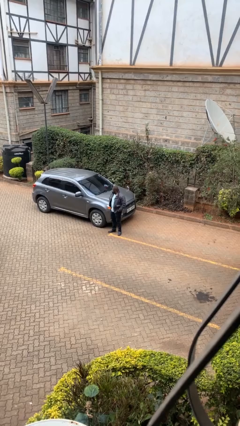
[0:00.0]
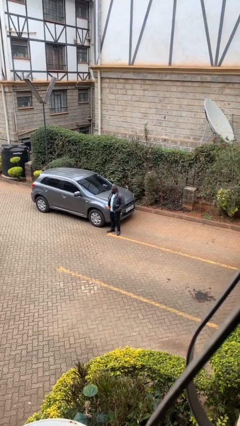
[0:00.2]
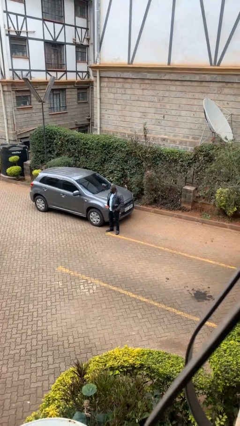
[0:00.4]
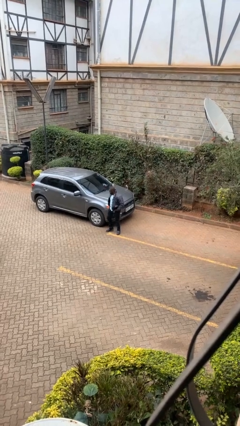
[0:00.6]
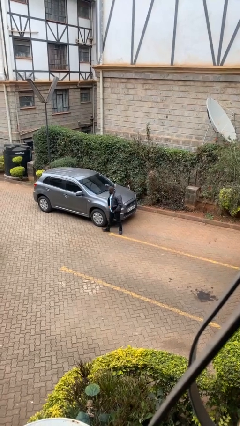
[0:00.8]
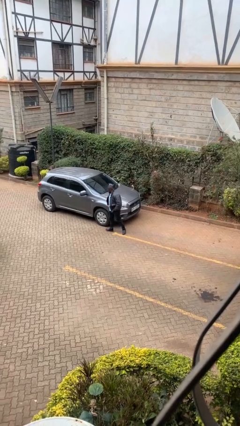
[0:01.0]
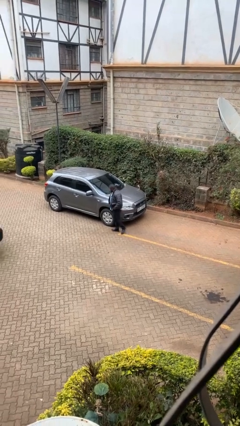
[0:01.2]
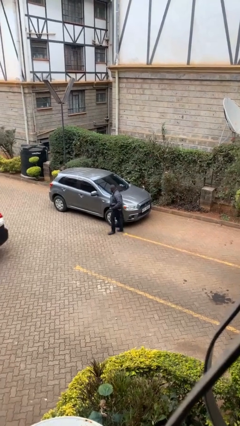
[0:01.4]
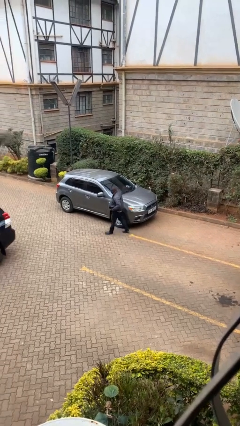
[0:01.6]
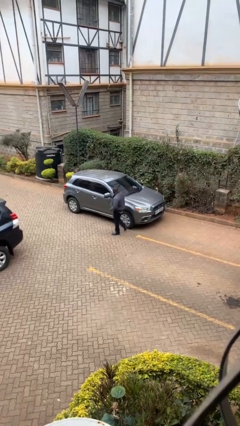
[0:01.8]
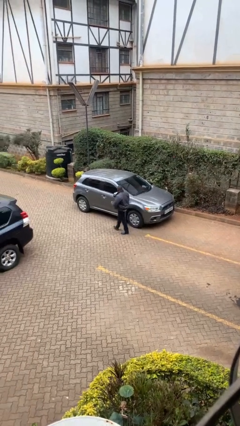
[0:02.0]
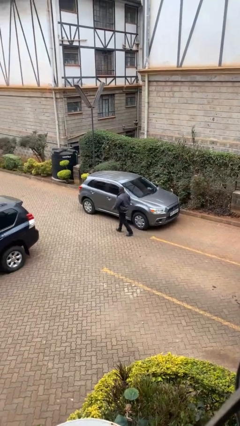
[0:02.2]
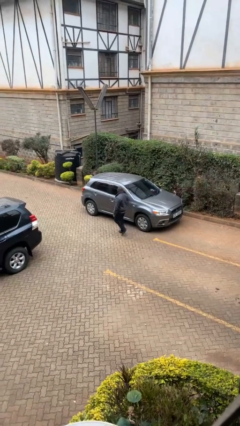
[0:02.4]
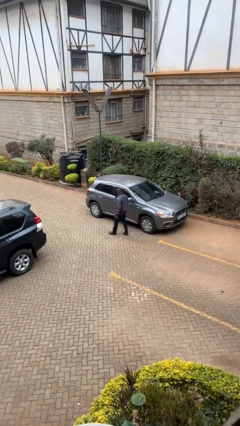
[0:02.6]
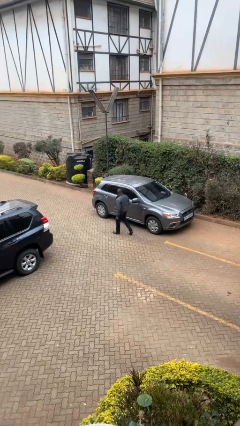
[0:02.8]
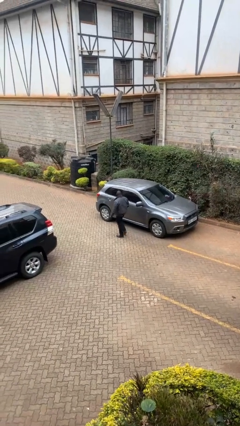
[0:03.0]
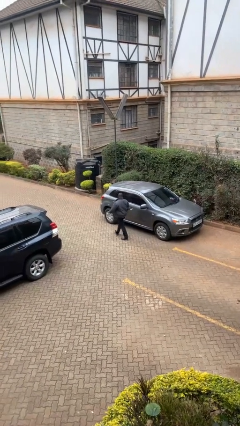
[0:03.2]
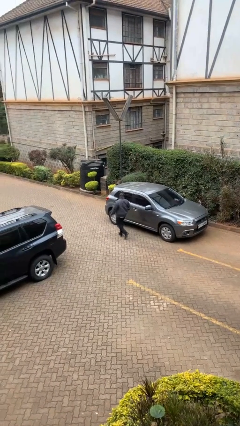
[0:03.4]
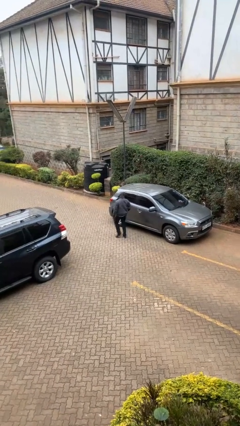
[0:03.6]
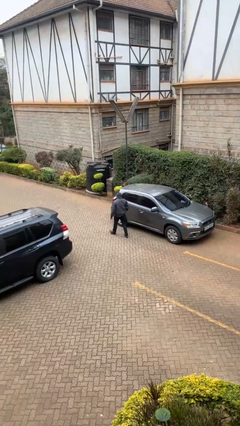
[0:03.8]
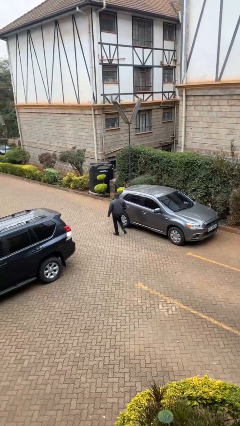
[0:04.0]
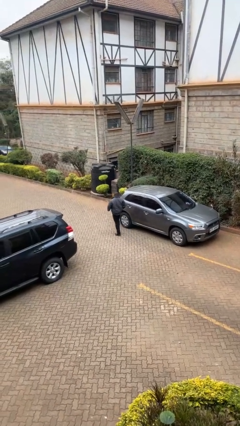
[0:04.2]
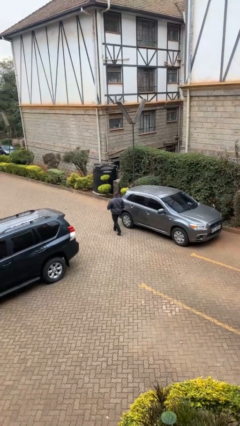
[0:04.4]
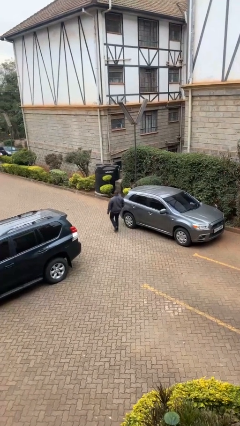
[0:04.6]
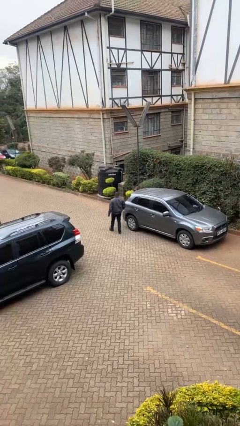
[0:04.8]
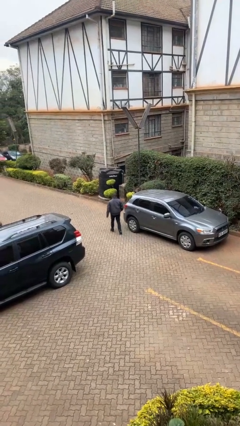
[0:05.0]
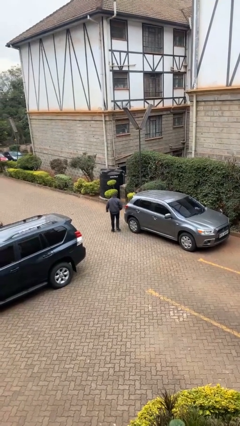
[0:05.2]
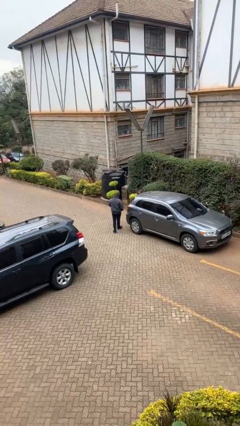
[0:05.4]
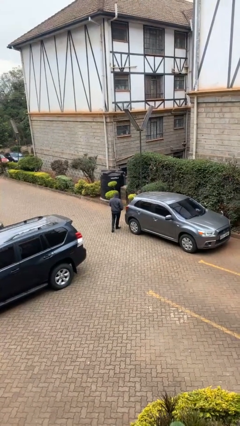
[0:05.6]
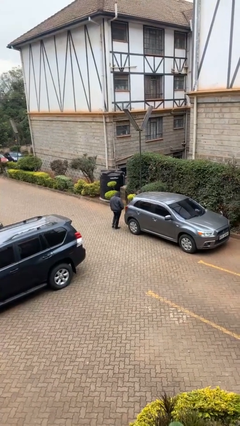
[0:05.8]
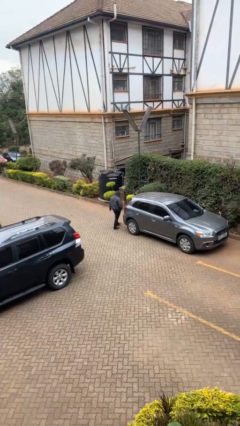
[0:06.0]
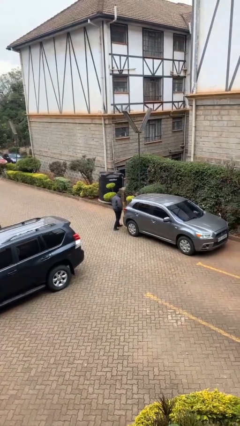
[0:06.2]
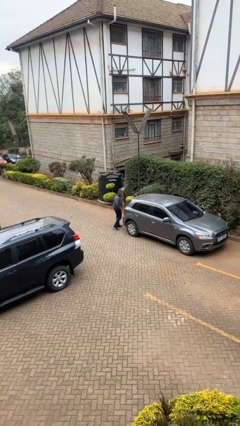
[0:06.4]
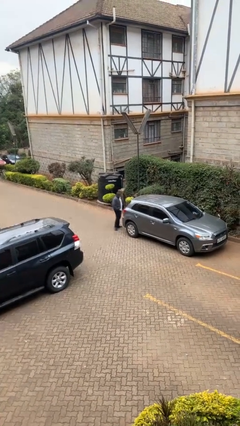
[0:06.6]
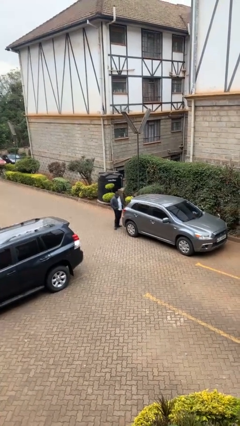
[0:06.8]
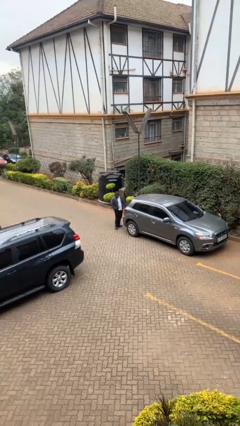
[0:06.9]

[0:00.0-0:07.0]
person walks around car

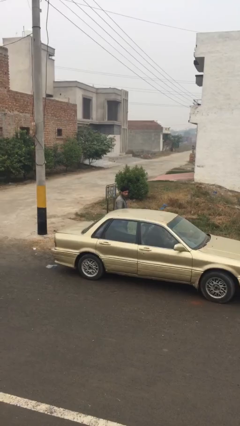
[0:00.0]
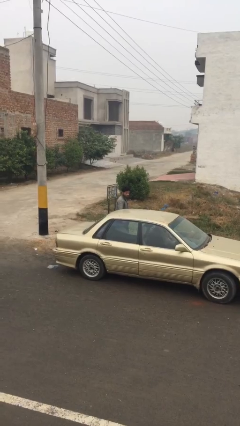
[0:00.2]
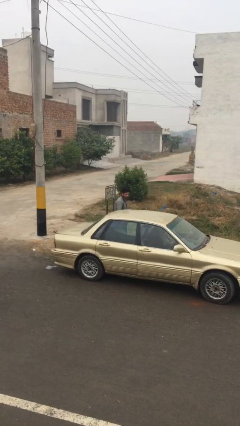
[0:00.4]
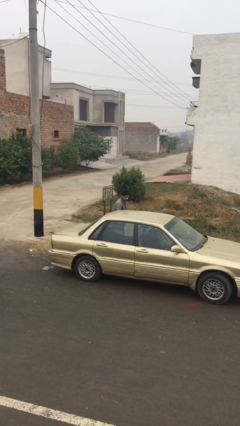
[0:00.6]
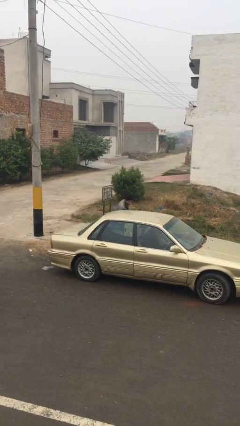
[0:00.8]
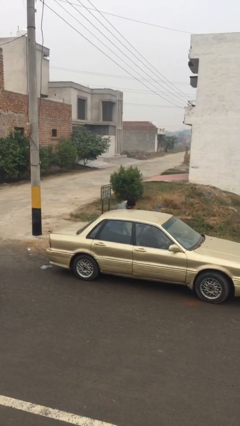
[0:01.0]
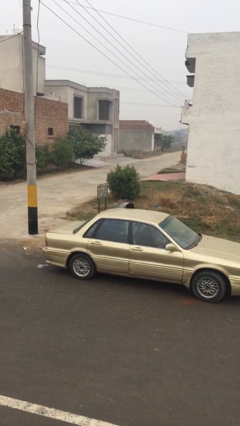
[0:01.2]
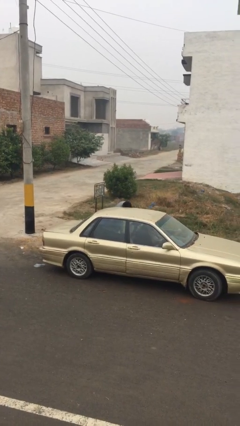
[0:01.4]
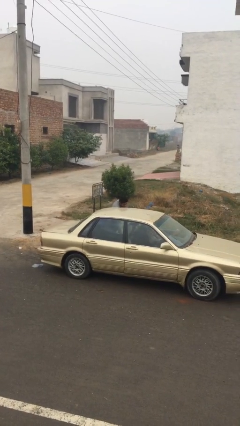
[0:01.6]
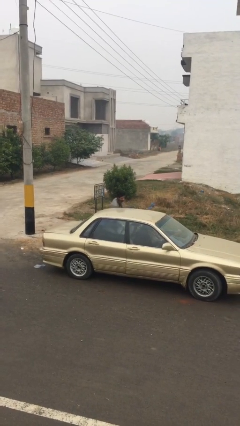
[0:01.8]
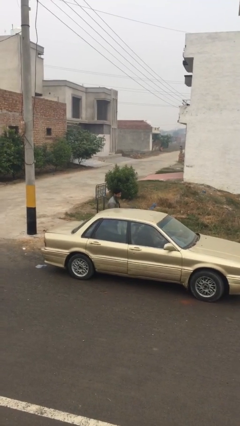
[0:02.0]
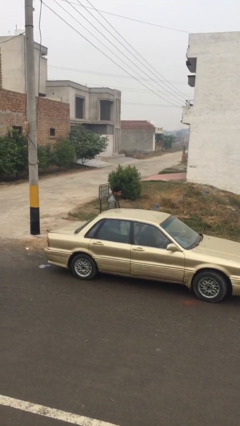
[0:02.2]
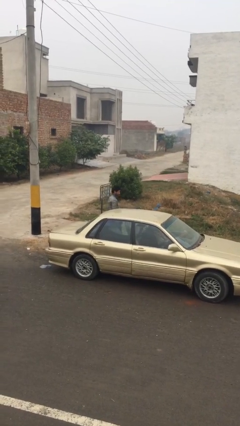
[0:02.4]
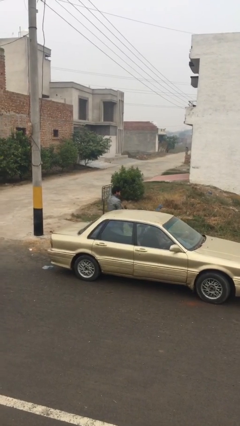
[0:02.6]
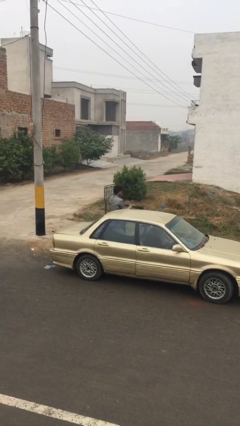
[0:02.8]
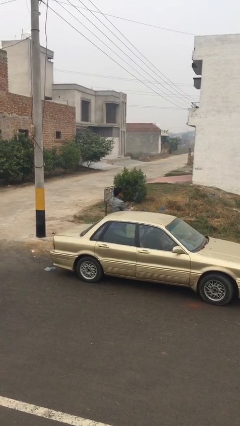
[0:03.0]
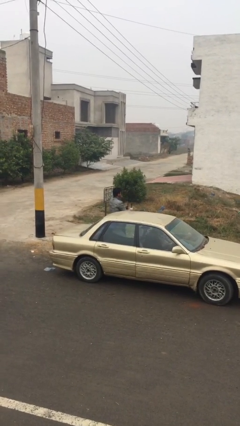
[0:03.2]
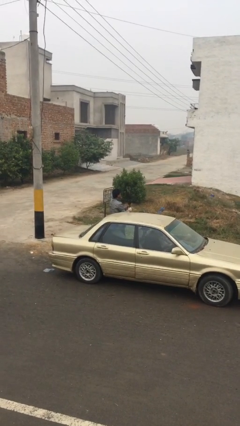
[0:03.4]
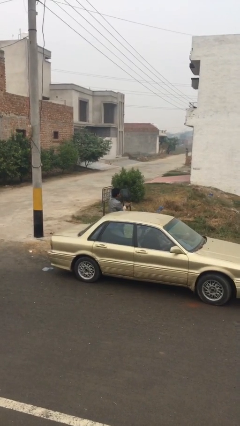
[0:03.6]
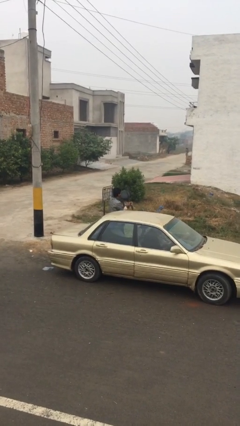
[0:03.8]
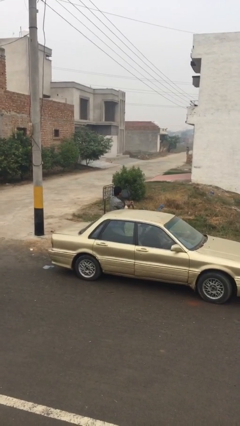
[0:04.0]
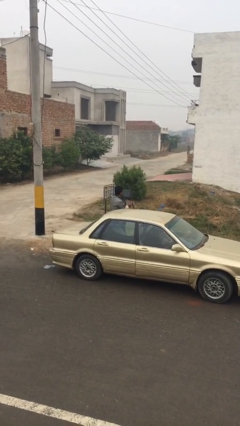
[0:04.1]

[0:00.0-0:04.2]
person unloads car

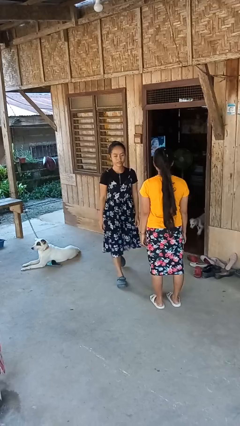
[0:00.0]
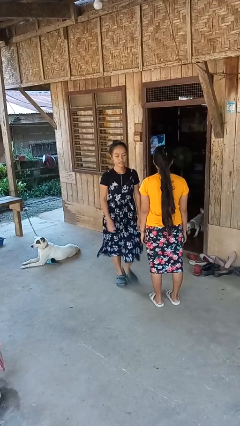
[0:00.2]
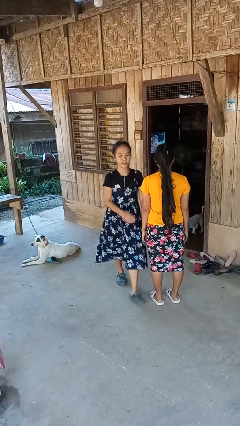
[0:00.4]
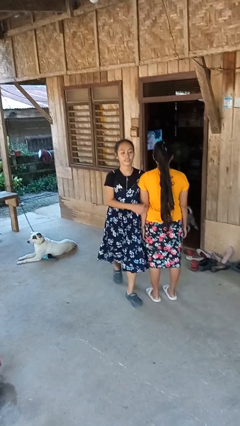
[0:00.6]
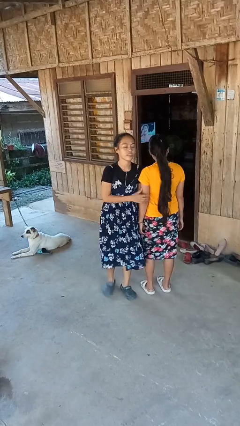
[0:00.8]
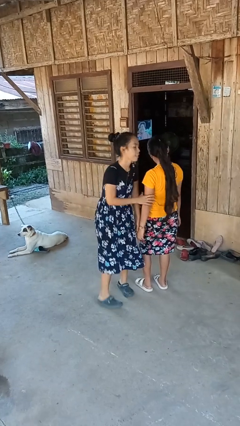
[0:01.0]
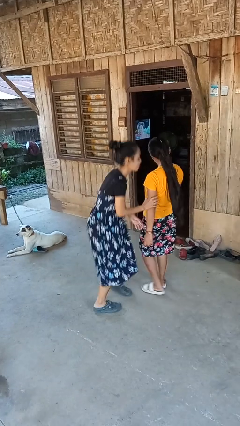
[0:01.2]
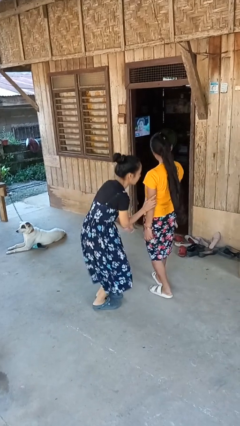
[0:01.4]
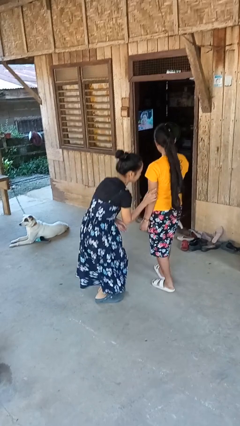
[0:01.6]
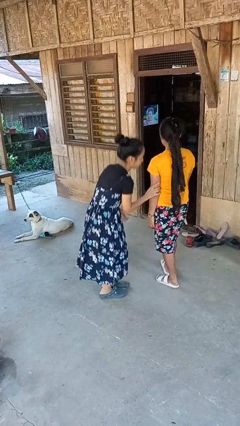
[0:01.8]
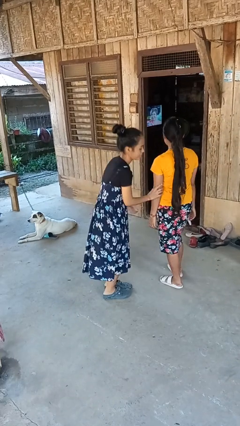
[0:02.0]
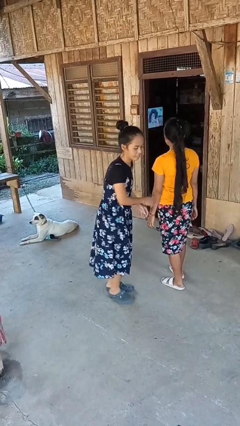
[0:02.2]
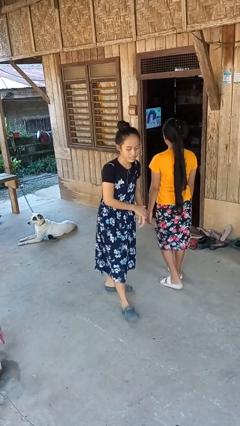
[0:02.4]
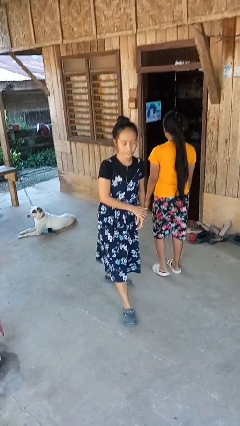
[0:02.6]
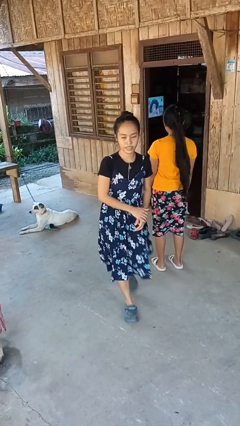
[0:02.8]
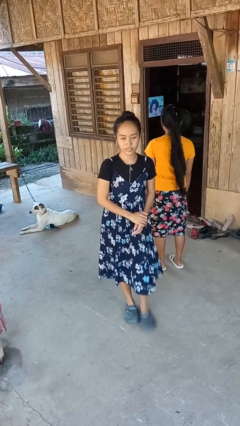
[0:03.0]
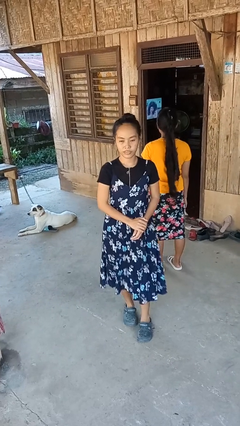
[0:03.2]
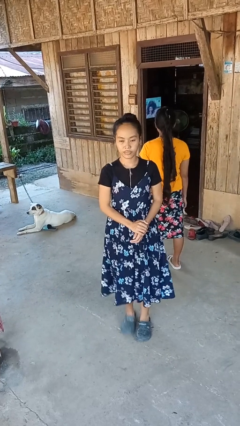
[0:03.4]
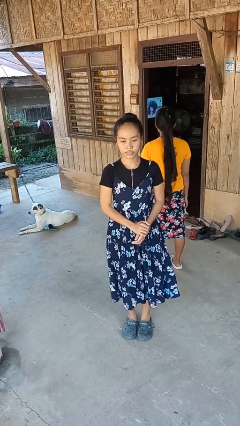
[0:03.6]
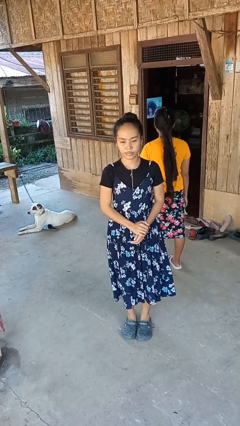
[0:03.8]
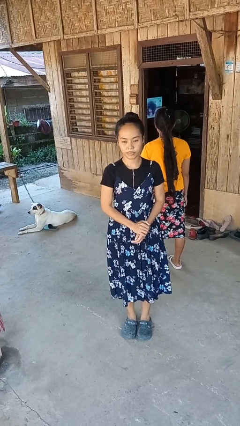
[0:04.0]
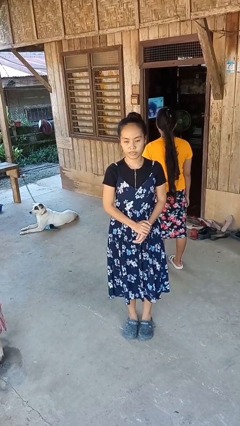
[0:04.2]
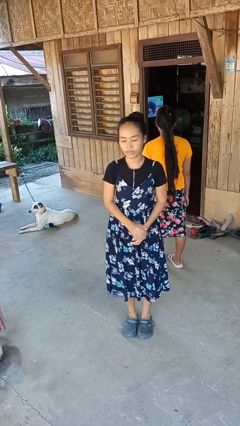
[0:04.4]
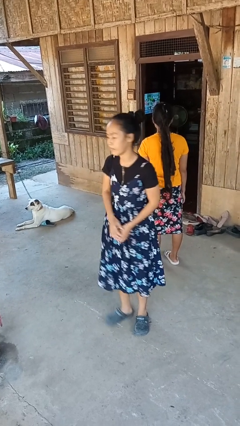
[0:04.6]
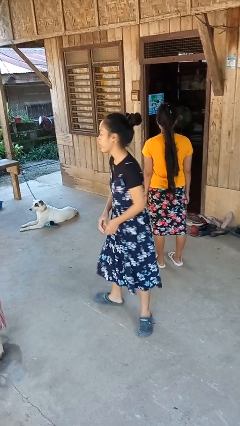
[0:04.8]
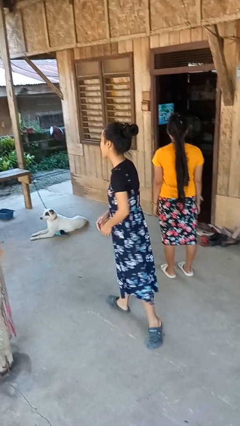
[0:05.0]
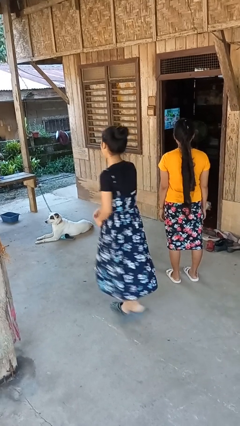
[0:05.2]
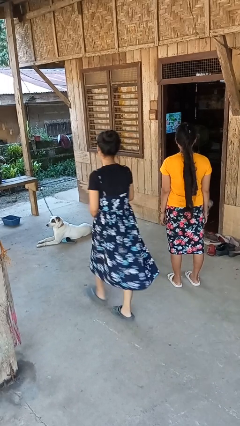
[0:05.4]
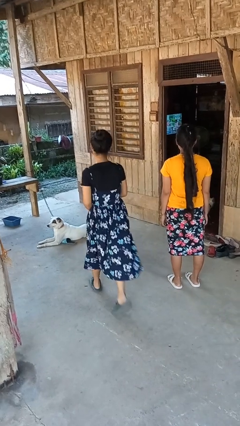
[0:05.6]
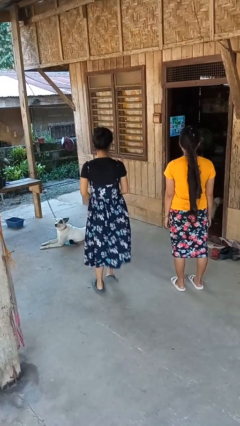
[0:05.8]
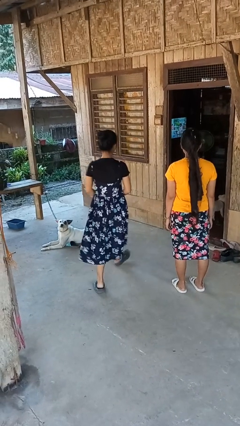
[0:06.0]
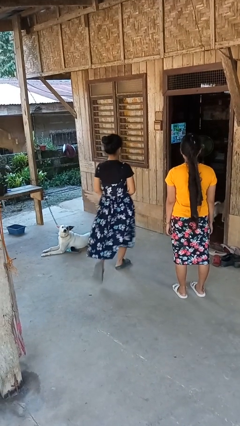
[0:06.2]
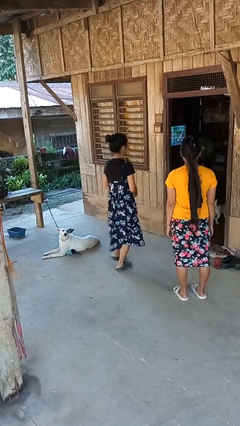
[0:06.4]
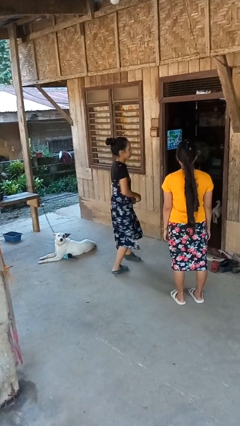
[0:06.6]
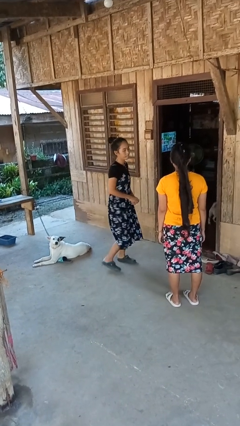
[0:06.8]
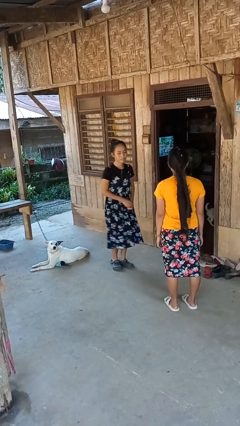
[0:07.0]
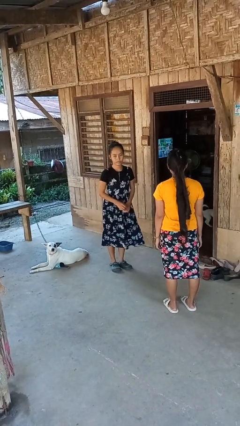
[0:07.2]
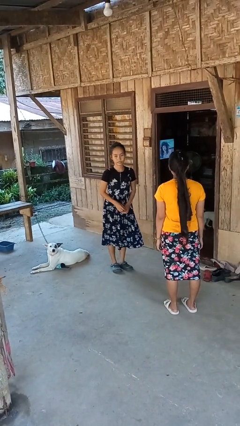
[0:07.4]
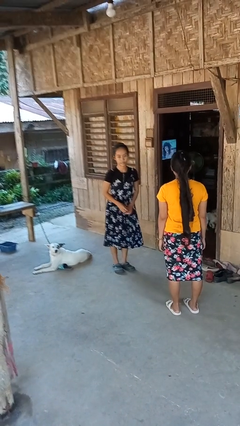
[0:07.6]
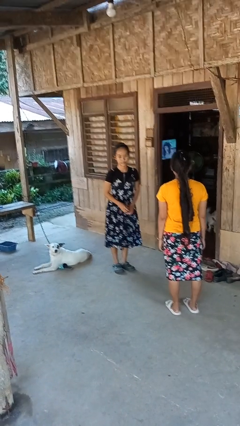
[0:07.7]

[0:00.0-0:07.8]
person bumps into person
